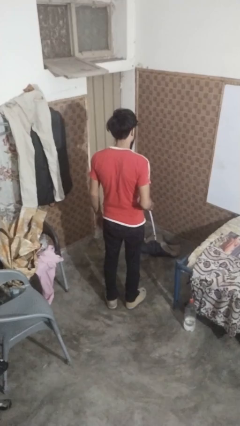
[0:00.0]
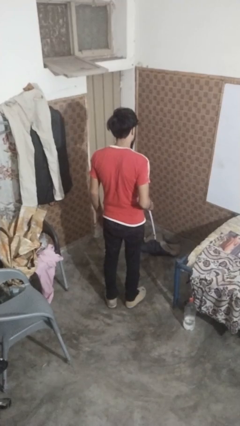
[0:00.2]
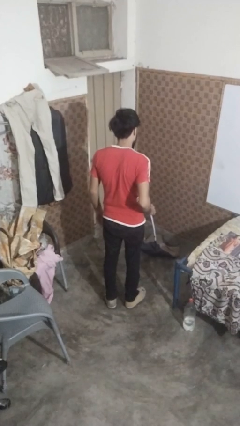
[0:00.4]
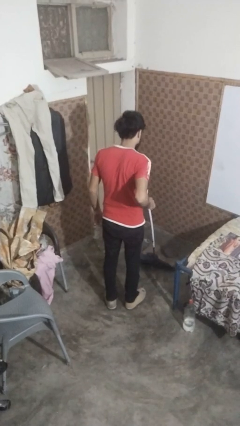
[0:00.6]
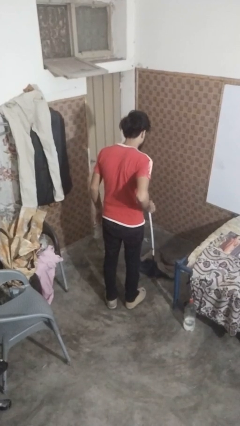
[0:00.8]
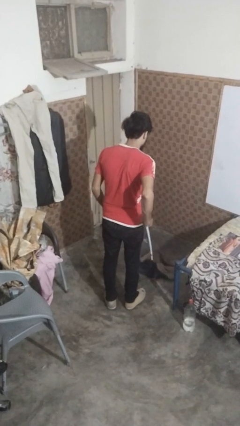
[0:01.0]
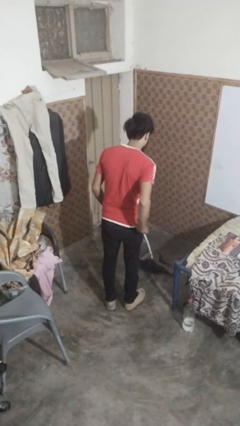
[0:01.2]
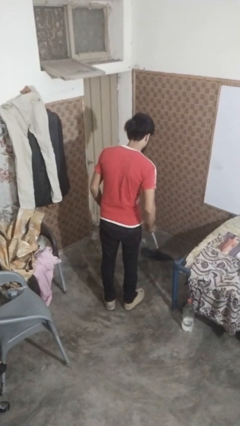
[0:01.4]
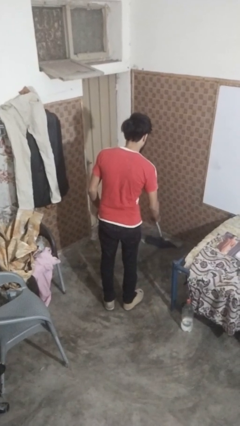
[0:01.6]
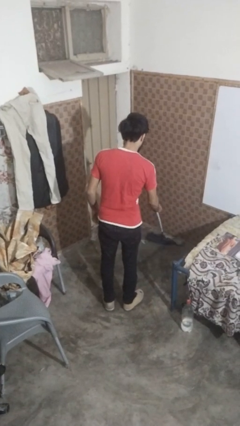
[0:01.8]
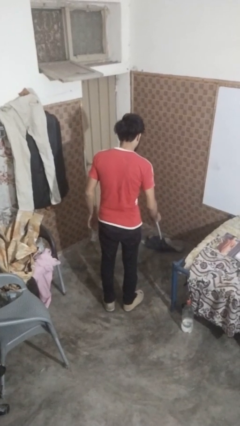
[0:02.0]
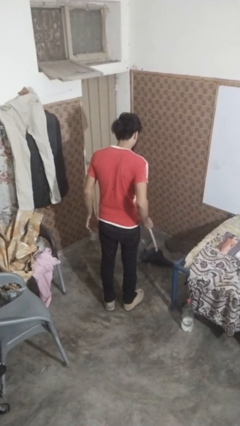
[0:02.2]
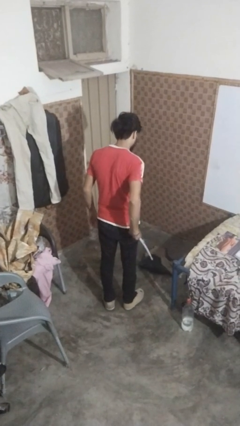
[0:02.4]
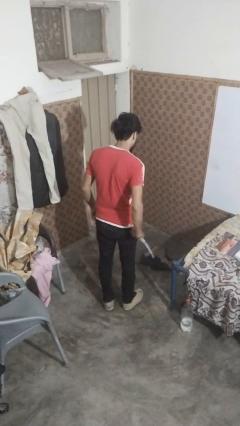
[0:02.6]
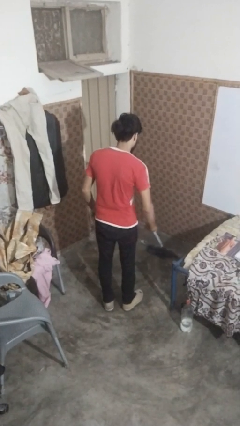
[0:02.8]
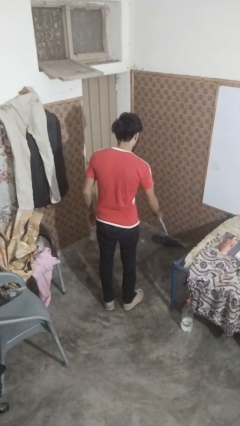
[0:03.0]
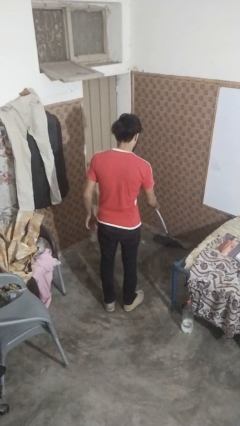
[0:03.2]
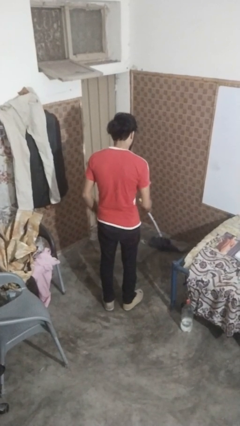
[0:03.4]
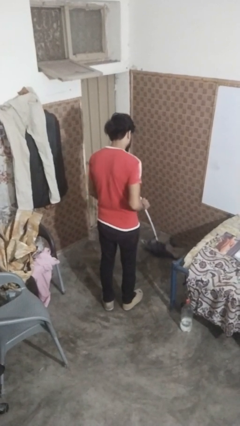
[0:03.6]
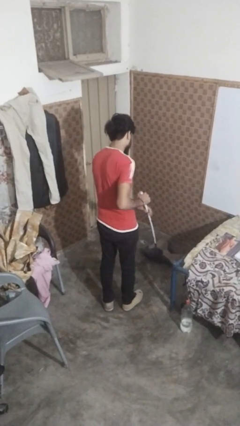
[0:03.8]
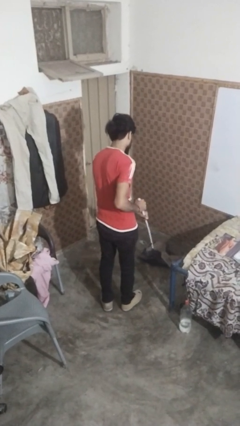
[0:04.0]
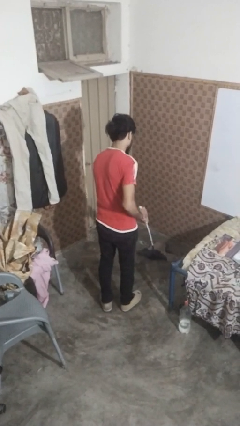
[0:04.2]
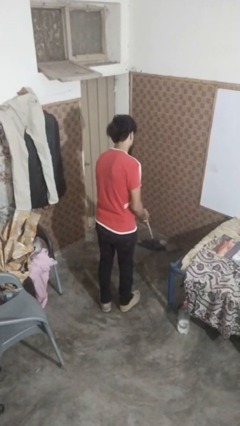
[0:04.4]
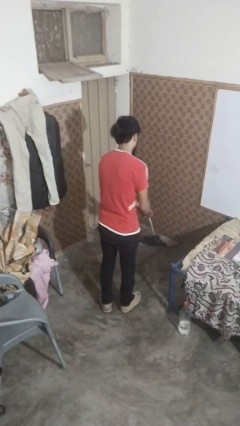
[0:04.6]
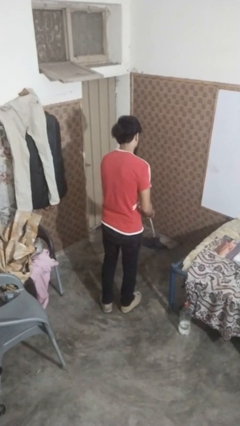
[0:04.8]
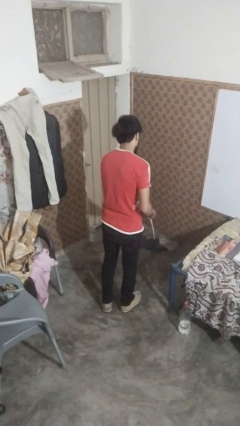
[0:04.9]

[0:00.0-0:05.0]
person mops

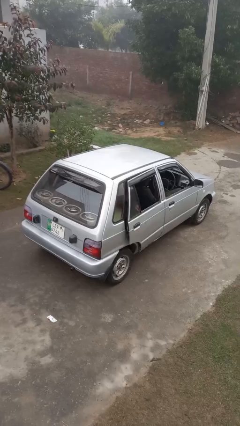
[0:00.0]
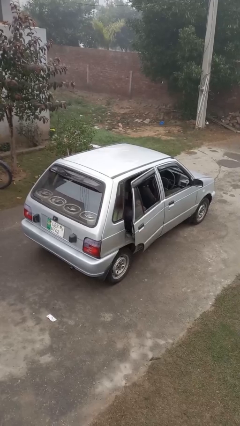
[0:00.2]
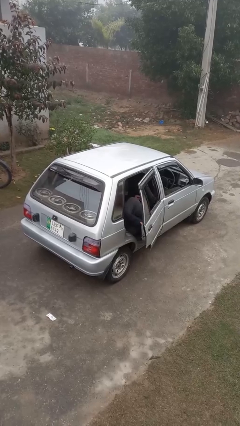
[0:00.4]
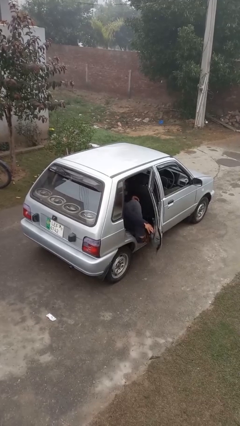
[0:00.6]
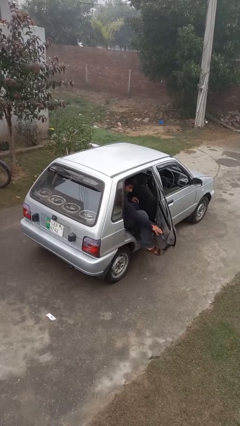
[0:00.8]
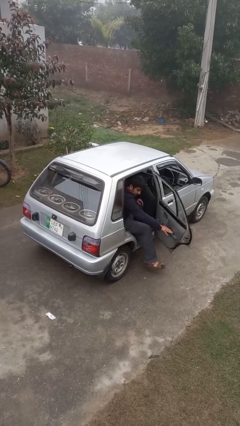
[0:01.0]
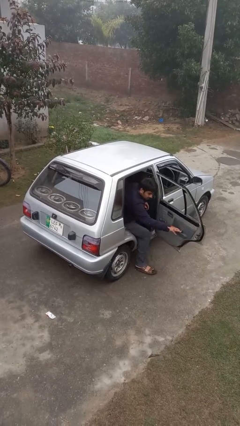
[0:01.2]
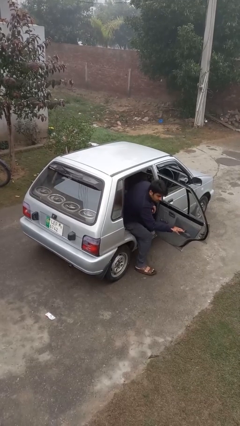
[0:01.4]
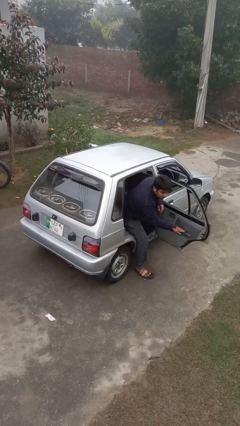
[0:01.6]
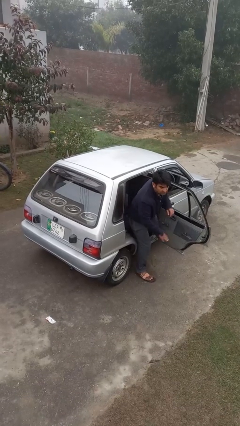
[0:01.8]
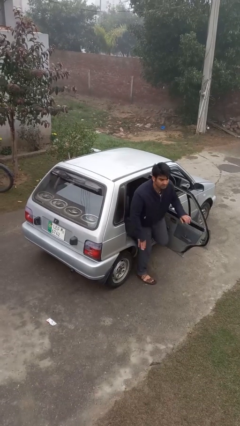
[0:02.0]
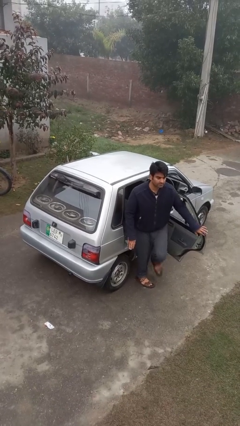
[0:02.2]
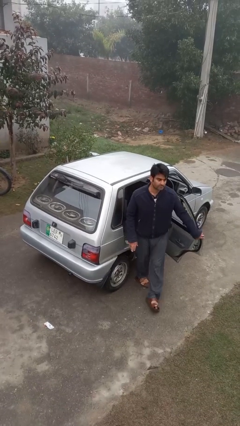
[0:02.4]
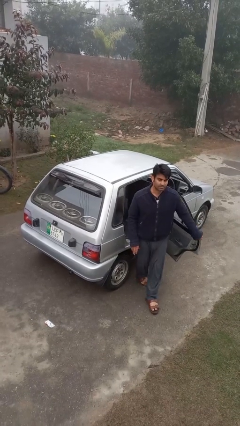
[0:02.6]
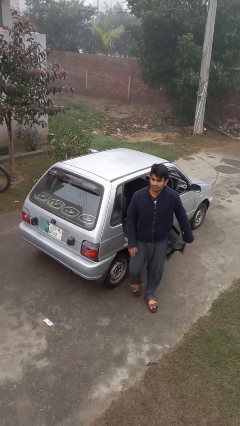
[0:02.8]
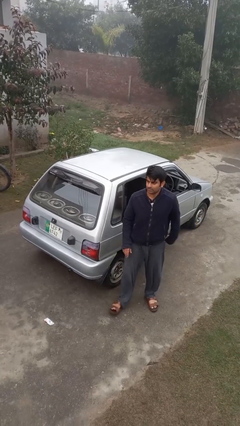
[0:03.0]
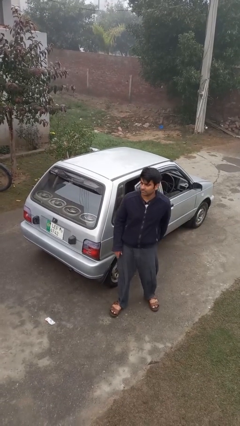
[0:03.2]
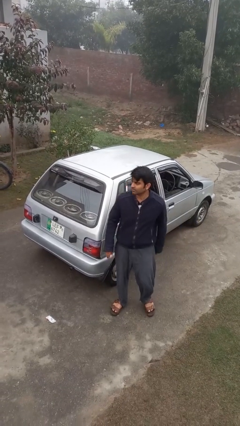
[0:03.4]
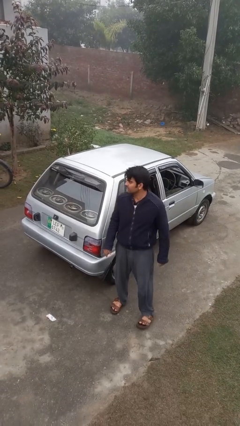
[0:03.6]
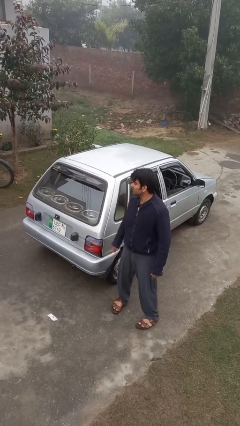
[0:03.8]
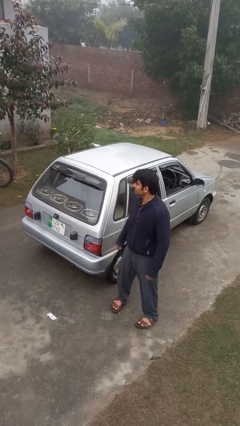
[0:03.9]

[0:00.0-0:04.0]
car drops off person

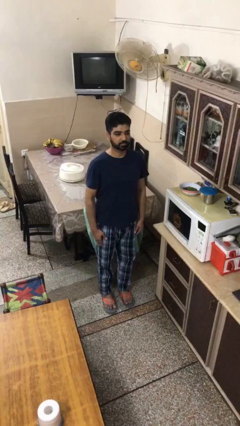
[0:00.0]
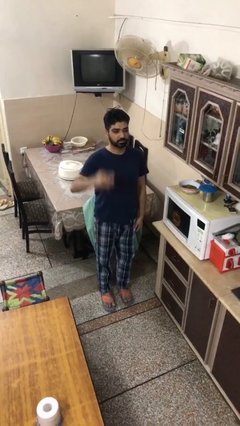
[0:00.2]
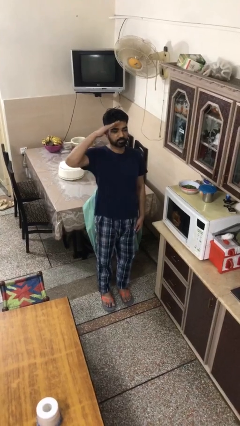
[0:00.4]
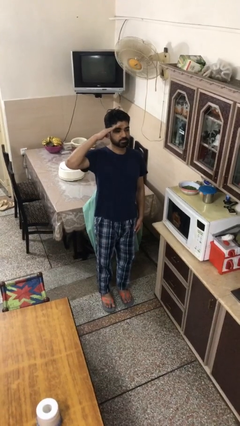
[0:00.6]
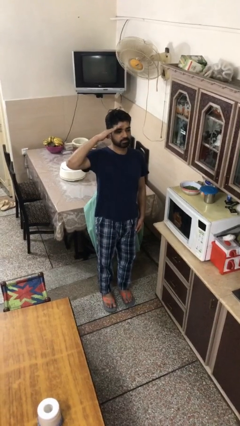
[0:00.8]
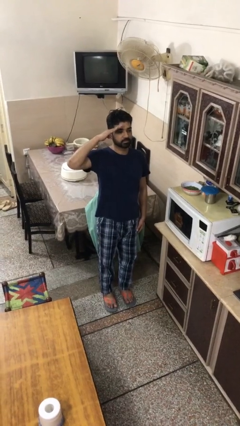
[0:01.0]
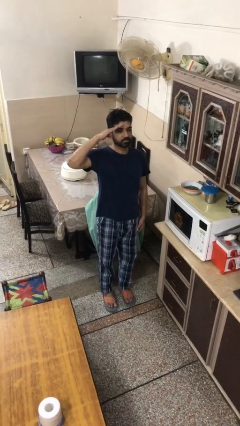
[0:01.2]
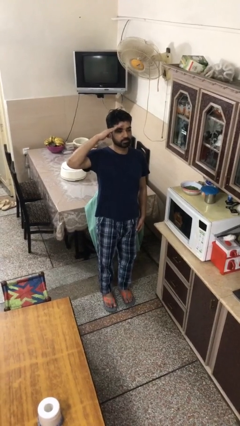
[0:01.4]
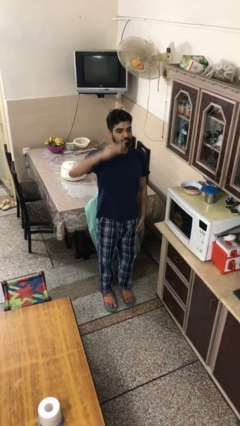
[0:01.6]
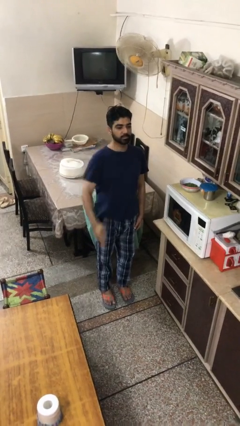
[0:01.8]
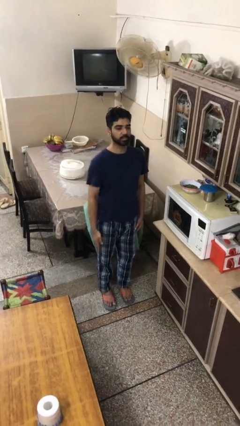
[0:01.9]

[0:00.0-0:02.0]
person salutes

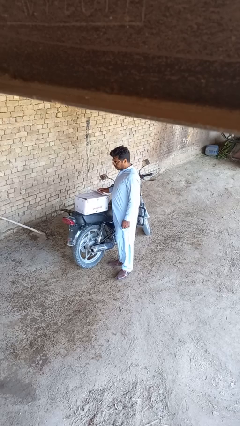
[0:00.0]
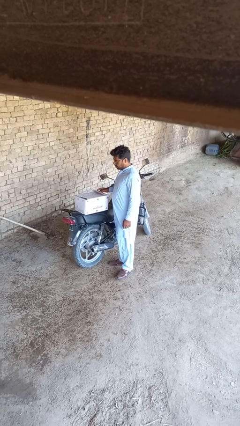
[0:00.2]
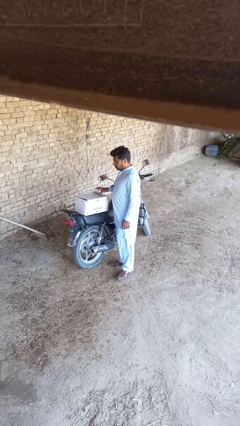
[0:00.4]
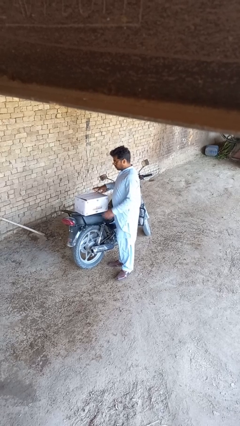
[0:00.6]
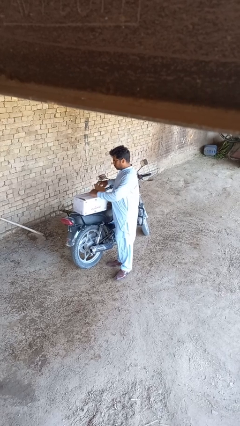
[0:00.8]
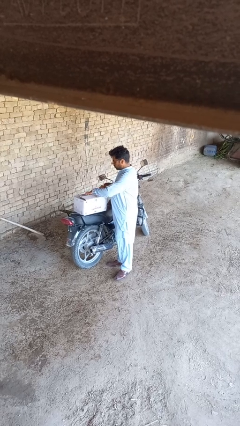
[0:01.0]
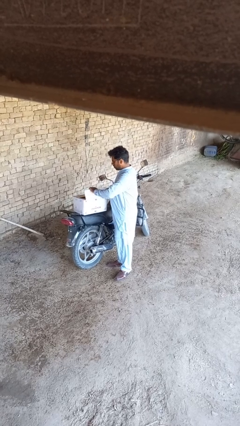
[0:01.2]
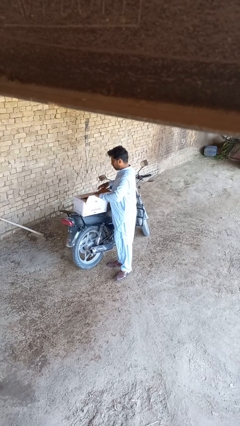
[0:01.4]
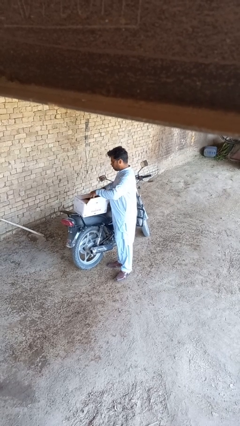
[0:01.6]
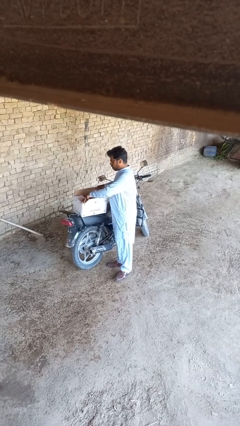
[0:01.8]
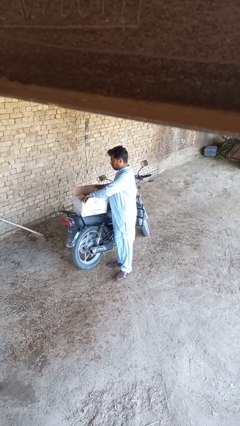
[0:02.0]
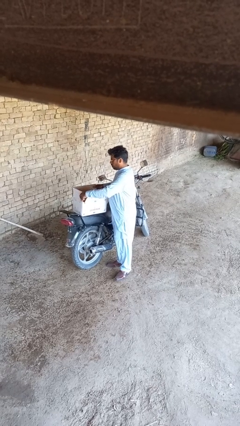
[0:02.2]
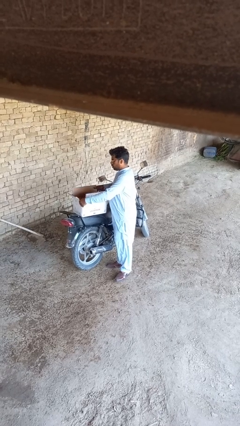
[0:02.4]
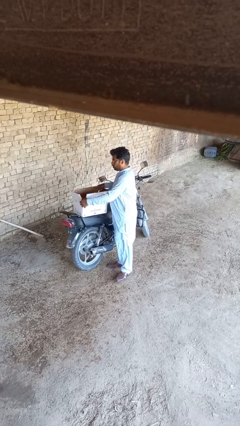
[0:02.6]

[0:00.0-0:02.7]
person opens box

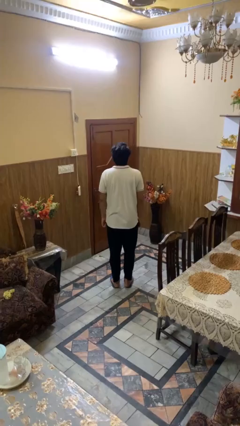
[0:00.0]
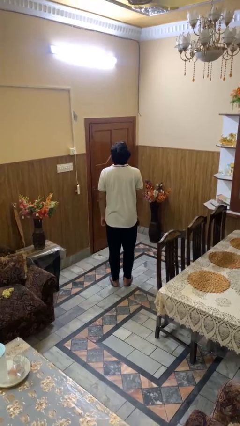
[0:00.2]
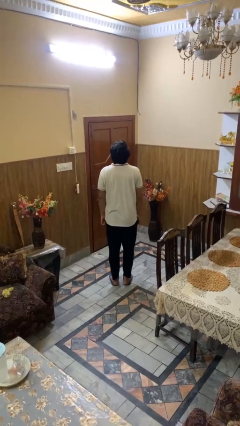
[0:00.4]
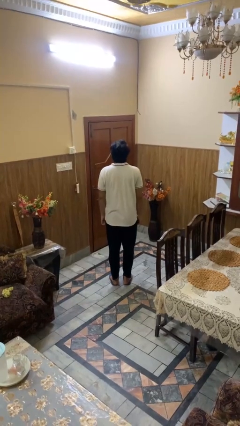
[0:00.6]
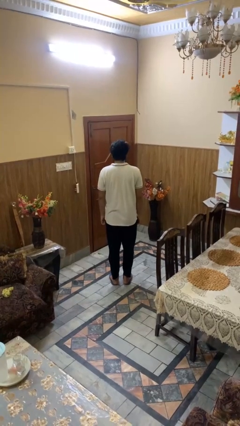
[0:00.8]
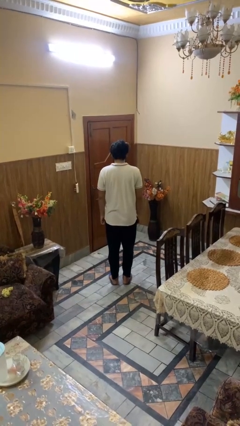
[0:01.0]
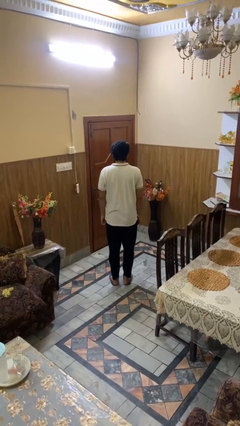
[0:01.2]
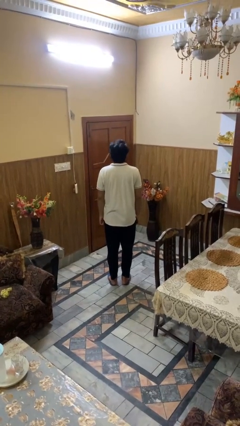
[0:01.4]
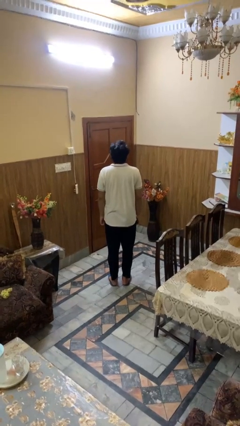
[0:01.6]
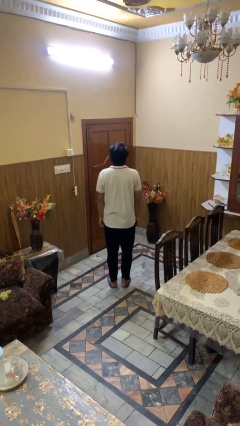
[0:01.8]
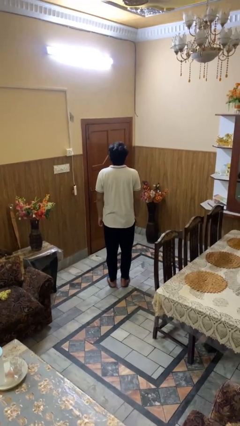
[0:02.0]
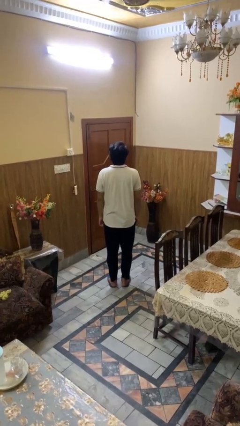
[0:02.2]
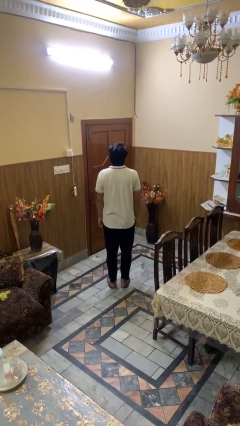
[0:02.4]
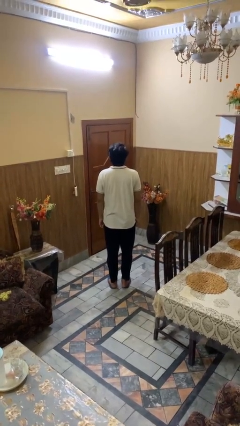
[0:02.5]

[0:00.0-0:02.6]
person nods head

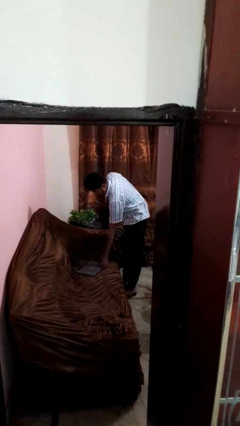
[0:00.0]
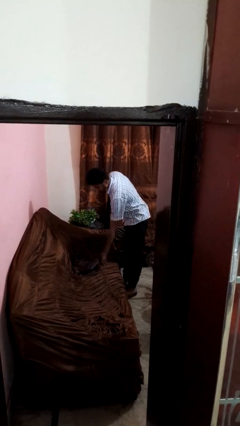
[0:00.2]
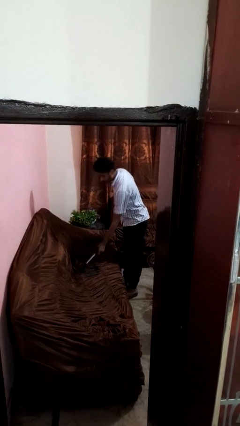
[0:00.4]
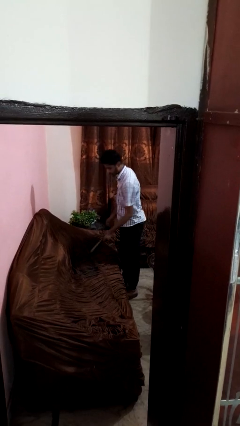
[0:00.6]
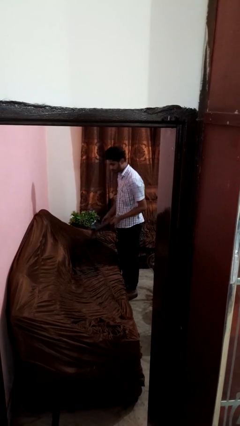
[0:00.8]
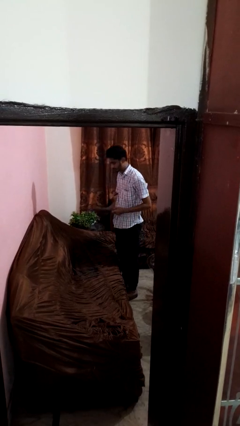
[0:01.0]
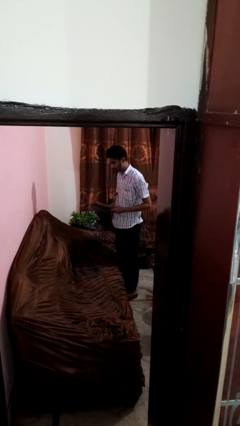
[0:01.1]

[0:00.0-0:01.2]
person picks up object from couch
